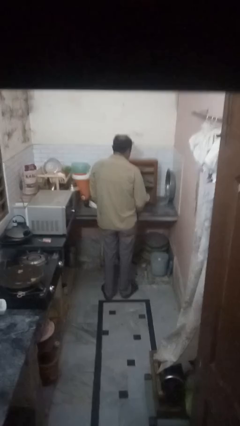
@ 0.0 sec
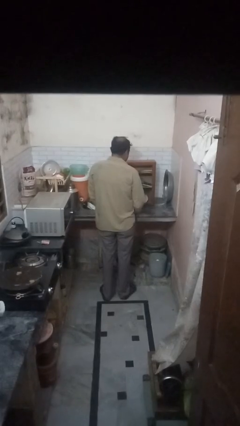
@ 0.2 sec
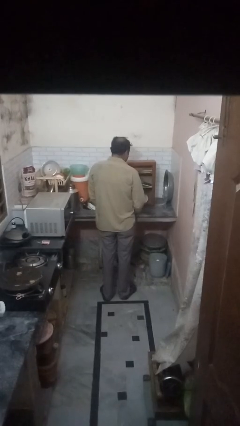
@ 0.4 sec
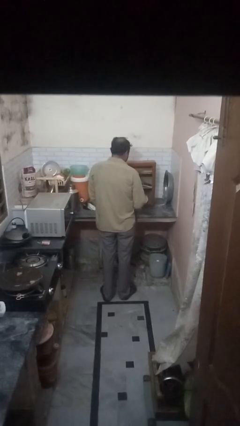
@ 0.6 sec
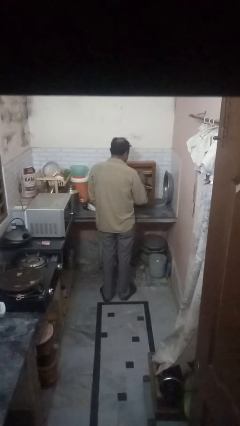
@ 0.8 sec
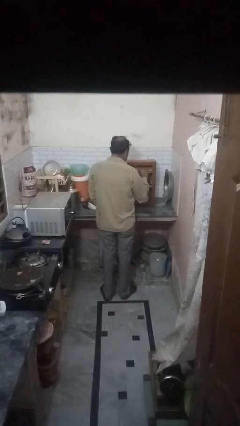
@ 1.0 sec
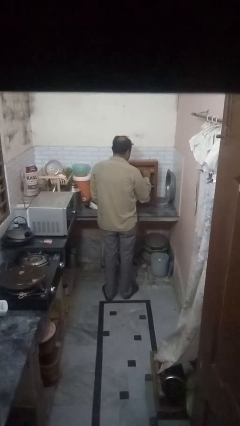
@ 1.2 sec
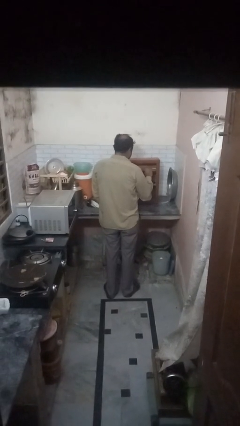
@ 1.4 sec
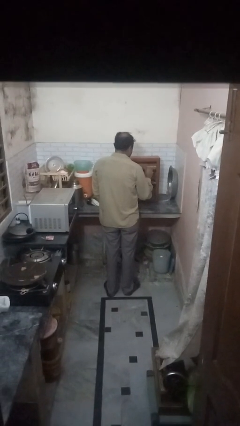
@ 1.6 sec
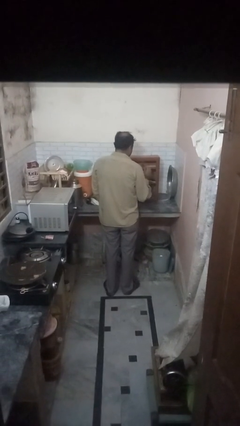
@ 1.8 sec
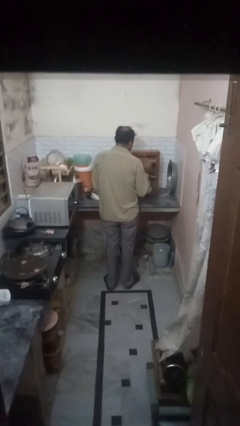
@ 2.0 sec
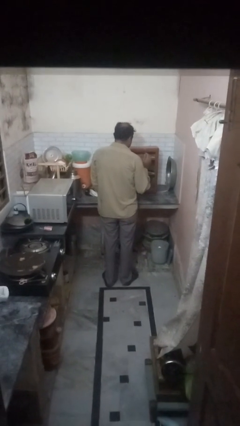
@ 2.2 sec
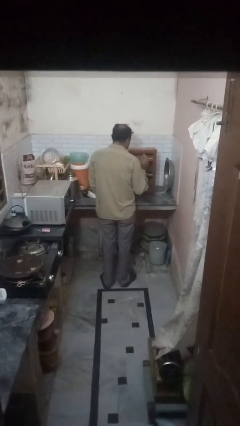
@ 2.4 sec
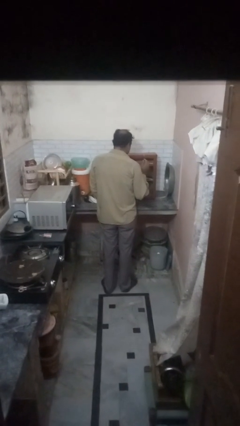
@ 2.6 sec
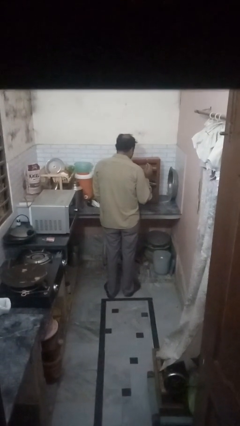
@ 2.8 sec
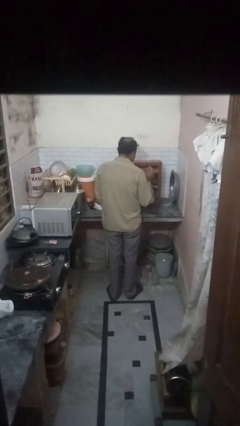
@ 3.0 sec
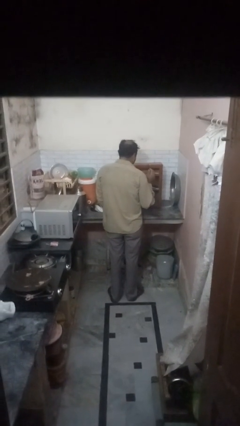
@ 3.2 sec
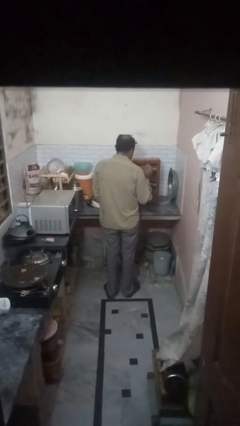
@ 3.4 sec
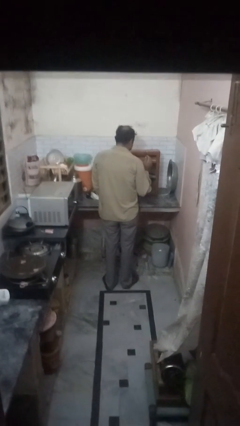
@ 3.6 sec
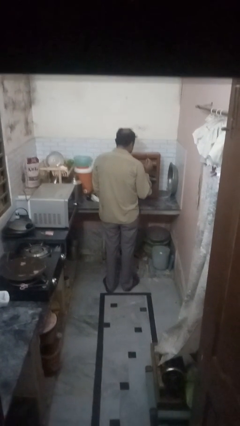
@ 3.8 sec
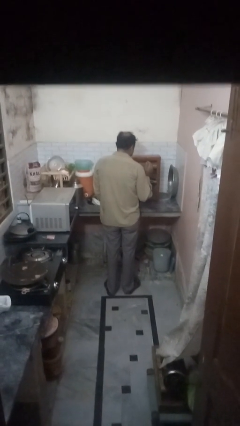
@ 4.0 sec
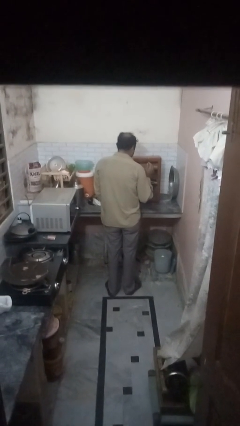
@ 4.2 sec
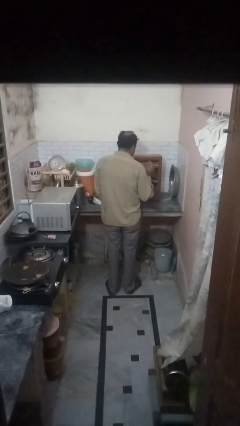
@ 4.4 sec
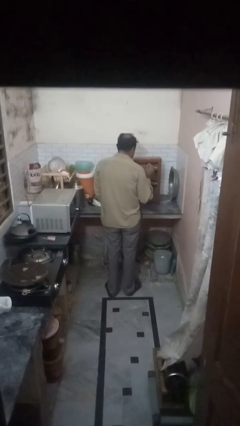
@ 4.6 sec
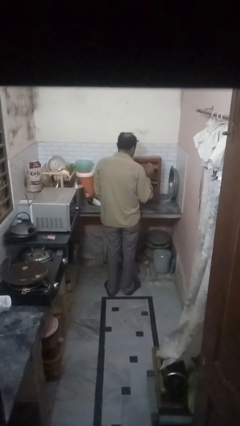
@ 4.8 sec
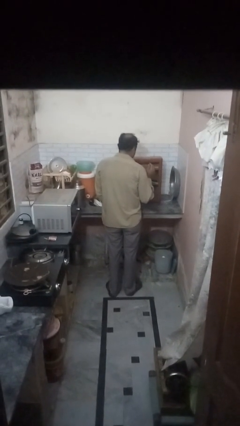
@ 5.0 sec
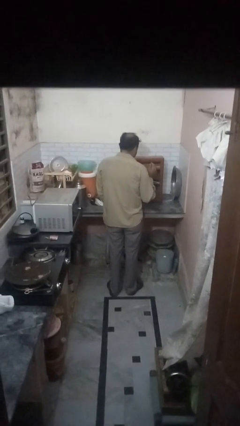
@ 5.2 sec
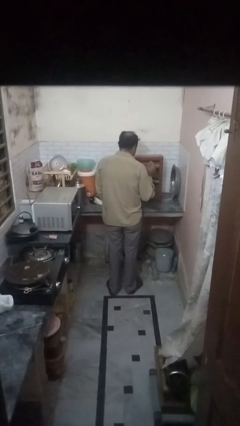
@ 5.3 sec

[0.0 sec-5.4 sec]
person puts object in cabinet

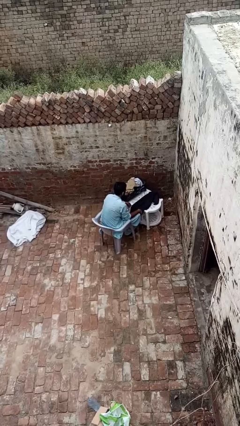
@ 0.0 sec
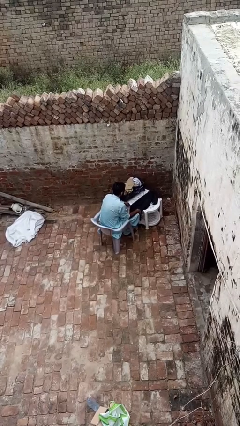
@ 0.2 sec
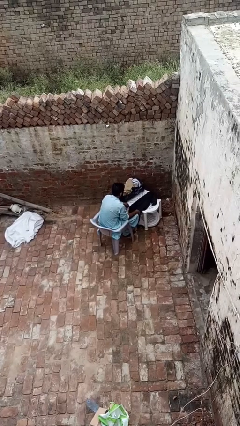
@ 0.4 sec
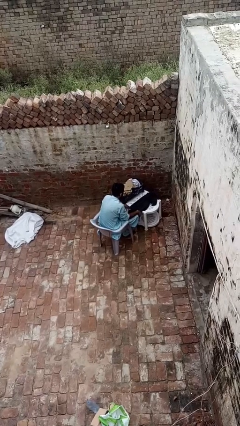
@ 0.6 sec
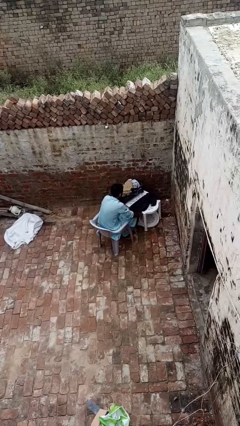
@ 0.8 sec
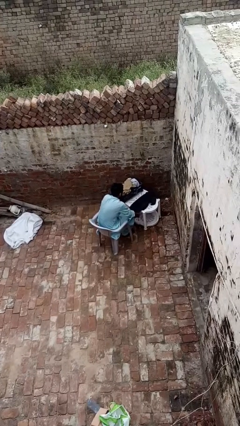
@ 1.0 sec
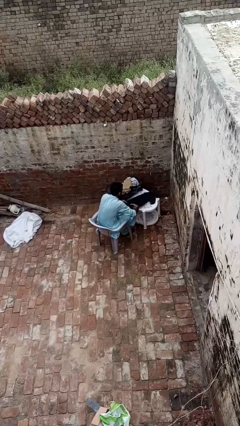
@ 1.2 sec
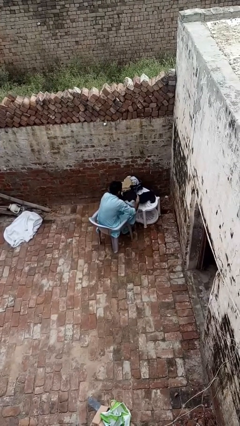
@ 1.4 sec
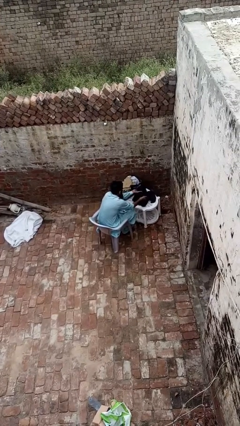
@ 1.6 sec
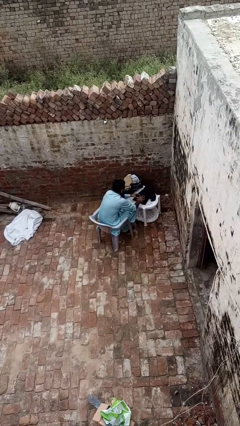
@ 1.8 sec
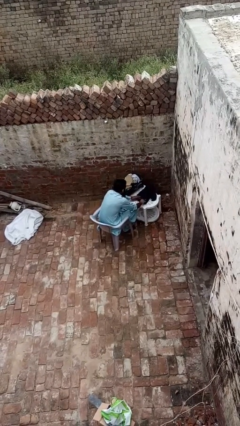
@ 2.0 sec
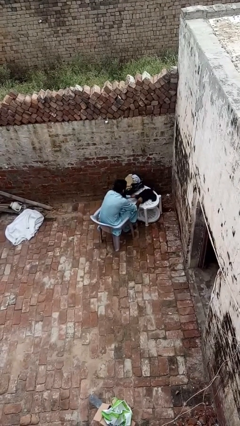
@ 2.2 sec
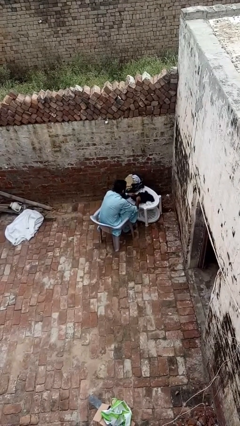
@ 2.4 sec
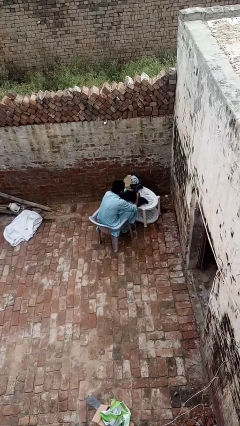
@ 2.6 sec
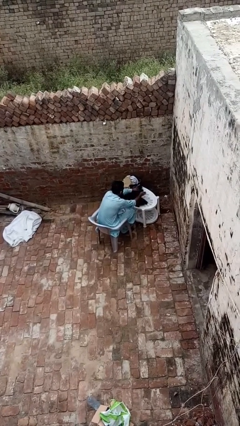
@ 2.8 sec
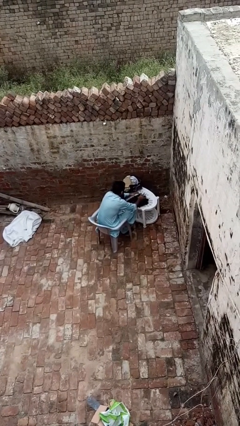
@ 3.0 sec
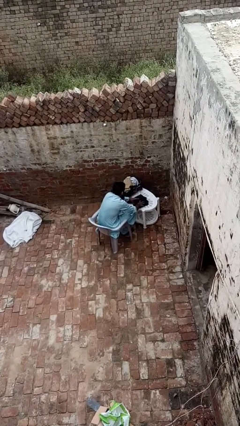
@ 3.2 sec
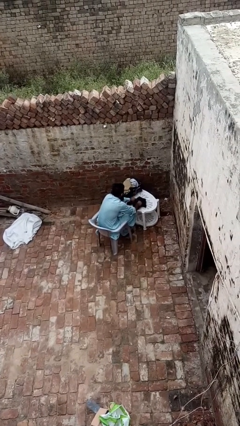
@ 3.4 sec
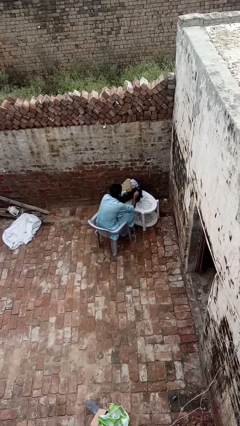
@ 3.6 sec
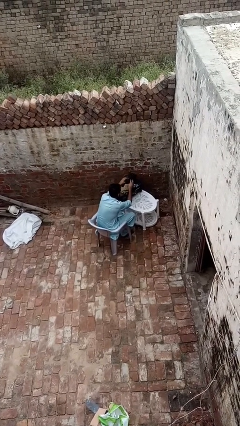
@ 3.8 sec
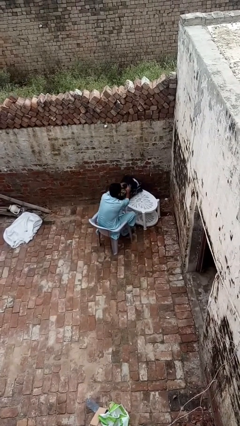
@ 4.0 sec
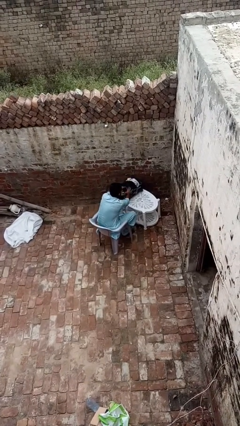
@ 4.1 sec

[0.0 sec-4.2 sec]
person folds pants

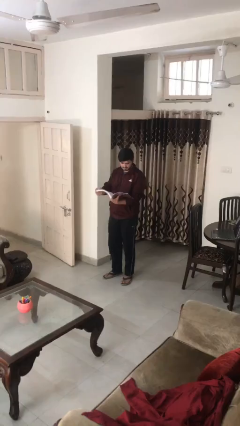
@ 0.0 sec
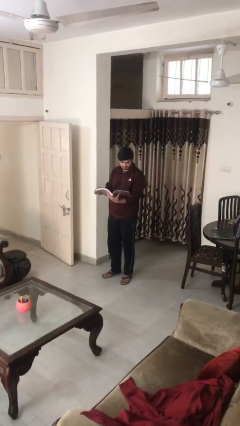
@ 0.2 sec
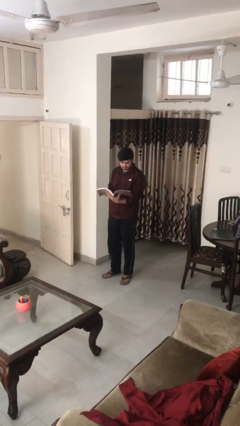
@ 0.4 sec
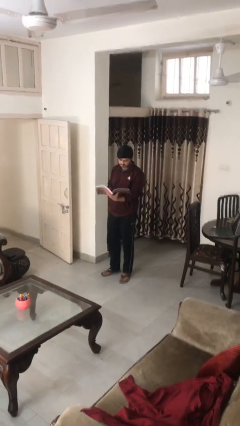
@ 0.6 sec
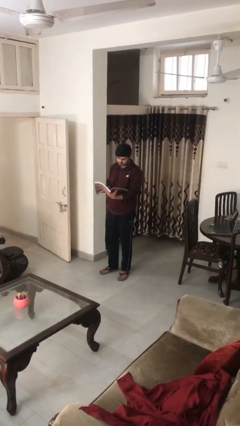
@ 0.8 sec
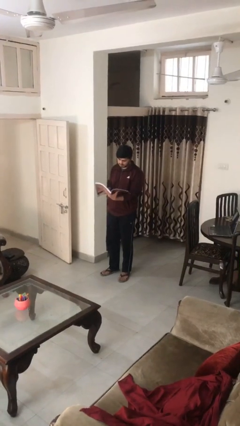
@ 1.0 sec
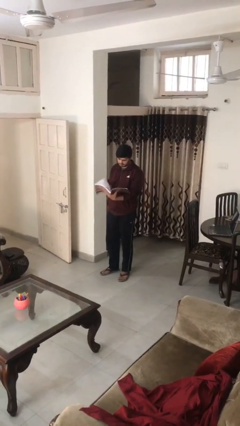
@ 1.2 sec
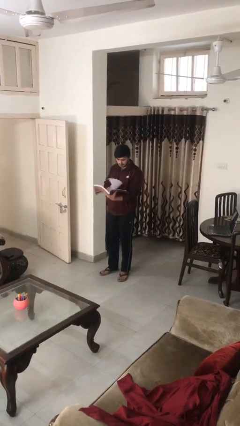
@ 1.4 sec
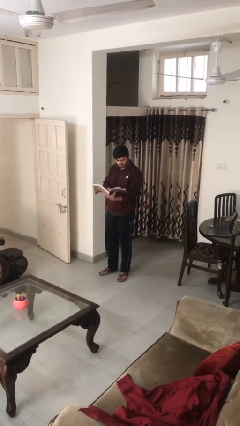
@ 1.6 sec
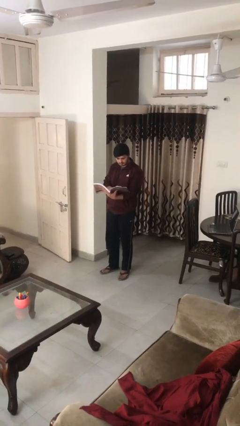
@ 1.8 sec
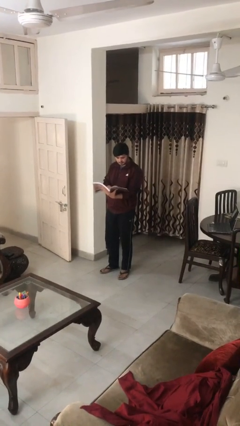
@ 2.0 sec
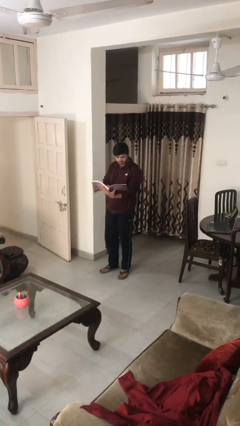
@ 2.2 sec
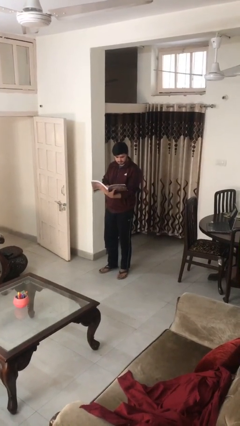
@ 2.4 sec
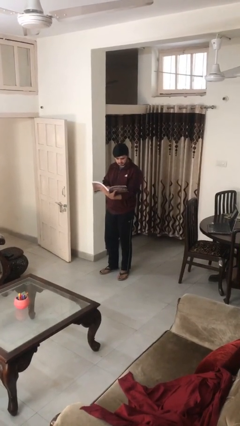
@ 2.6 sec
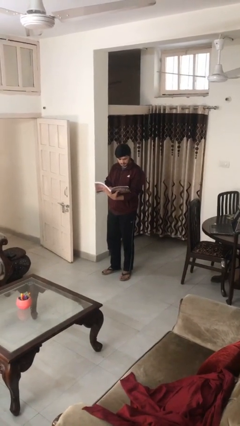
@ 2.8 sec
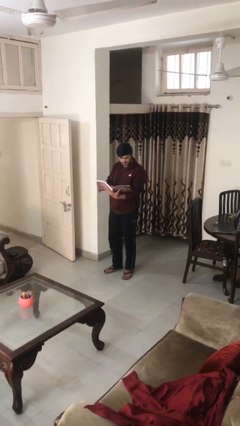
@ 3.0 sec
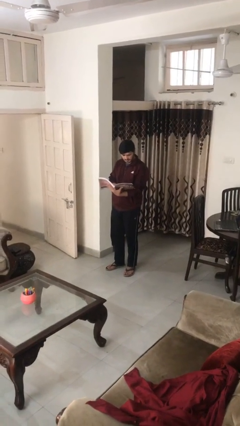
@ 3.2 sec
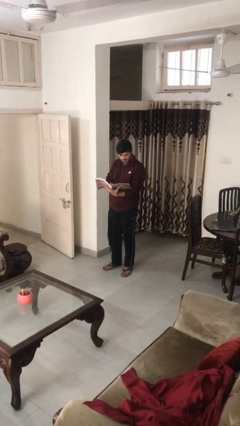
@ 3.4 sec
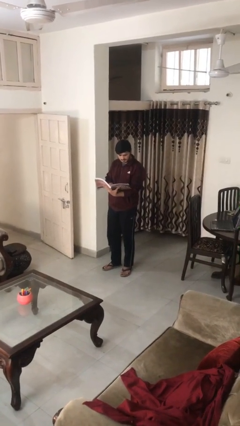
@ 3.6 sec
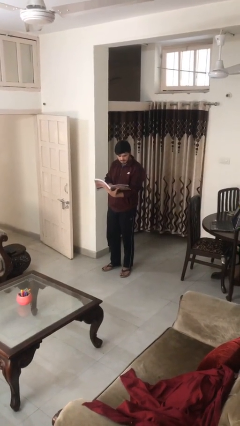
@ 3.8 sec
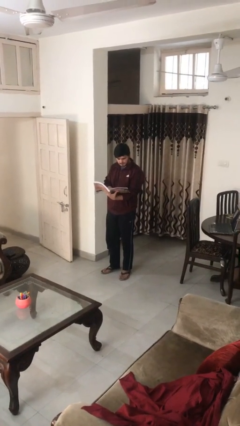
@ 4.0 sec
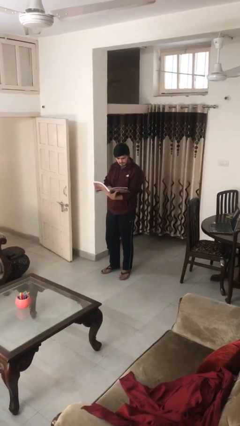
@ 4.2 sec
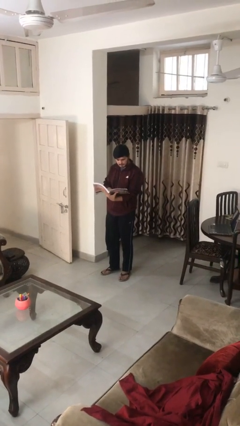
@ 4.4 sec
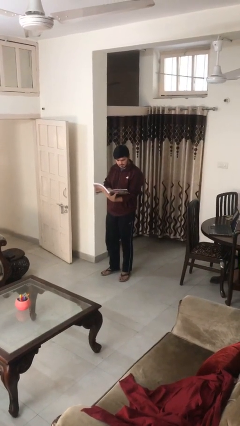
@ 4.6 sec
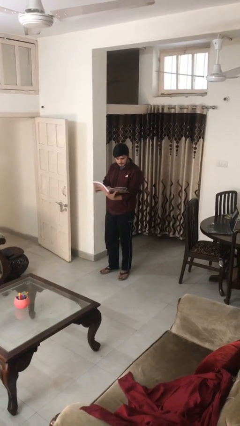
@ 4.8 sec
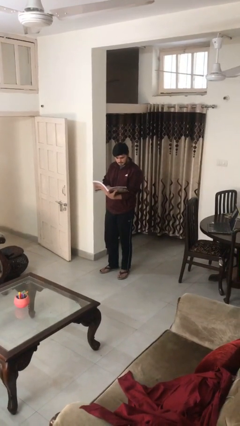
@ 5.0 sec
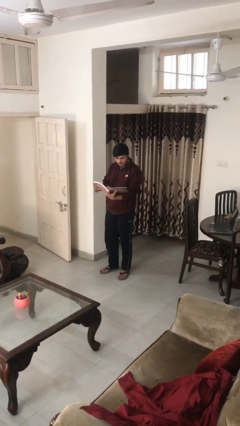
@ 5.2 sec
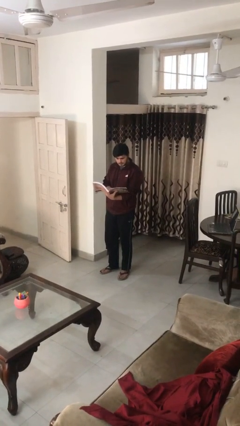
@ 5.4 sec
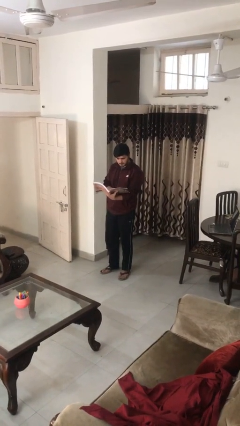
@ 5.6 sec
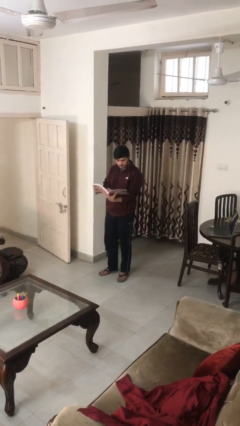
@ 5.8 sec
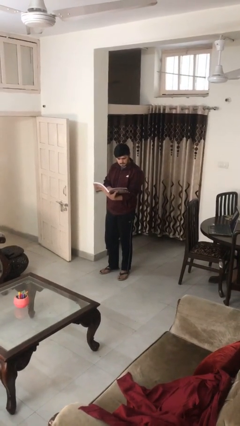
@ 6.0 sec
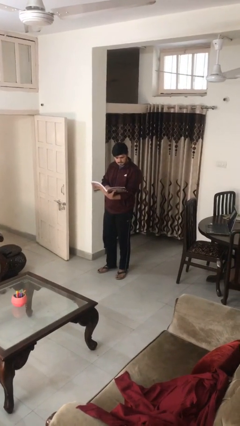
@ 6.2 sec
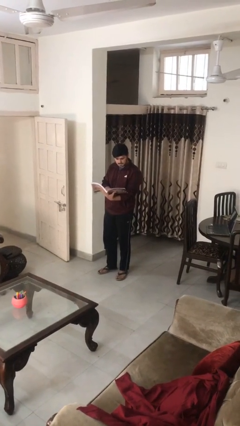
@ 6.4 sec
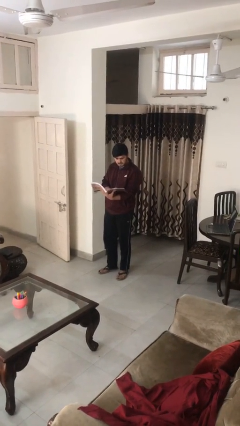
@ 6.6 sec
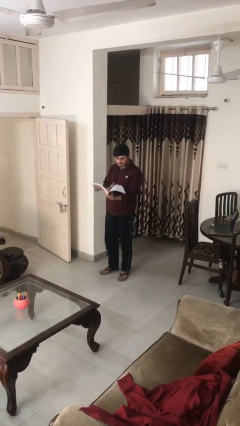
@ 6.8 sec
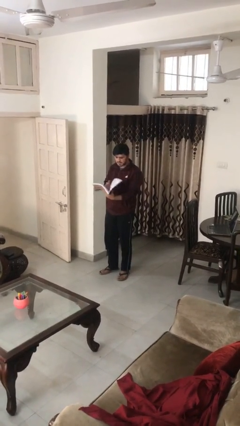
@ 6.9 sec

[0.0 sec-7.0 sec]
person reads document

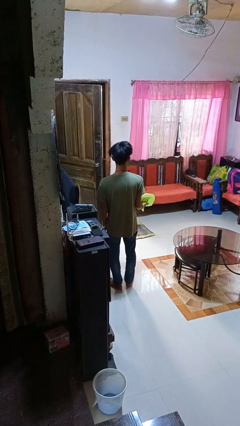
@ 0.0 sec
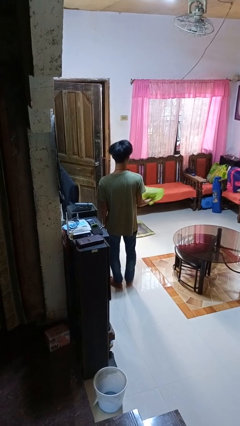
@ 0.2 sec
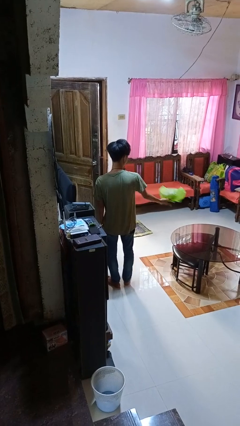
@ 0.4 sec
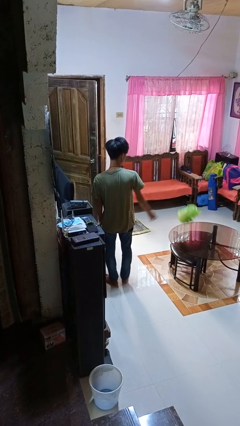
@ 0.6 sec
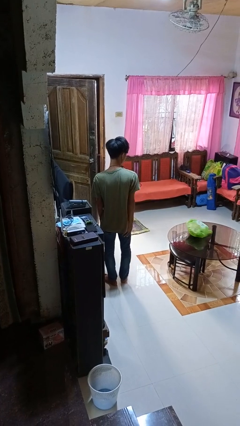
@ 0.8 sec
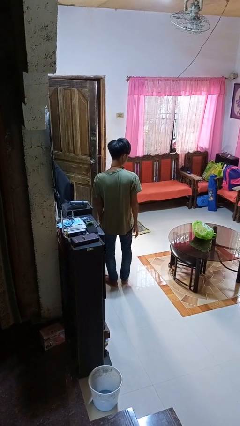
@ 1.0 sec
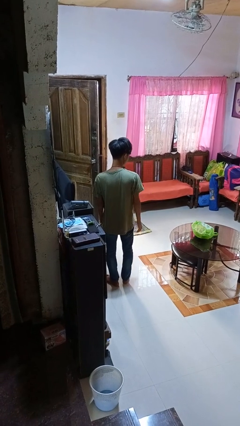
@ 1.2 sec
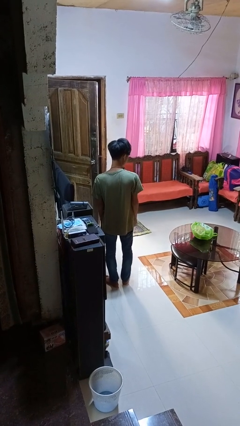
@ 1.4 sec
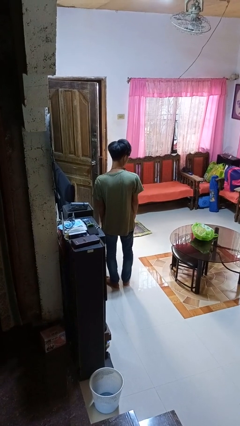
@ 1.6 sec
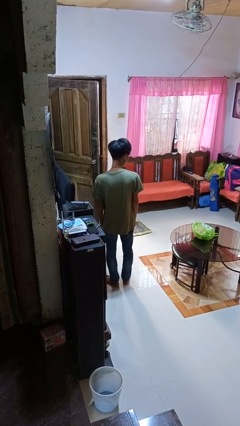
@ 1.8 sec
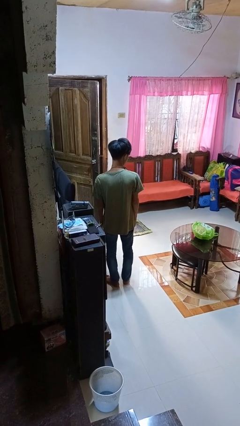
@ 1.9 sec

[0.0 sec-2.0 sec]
person throws object on table
